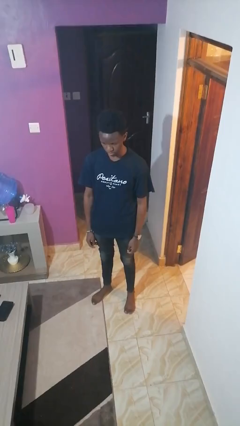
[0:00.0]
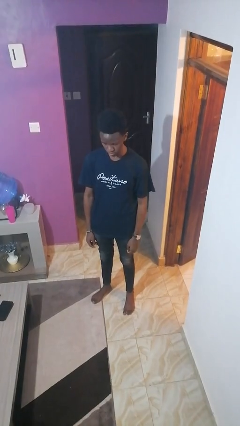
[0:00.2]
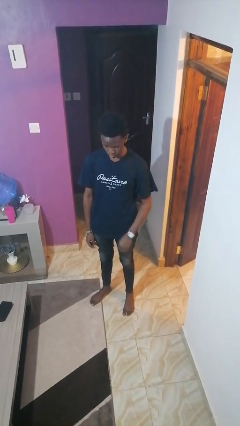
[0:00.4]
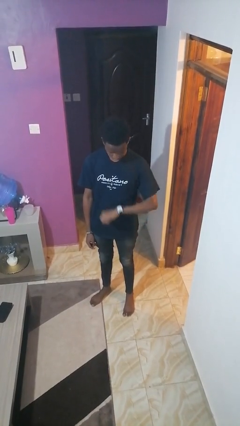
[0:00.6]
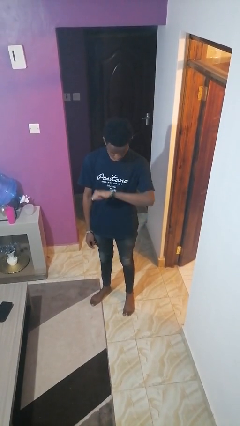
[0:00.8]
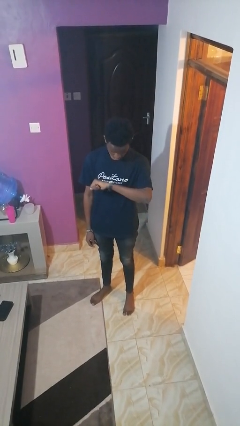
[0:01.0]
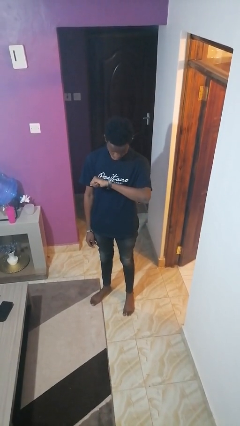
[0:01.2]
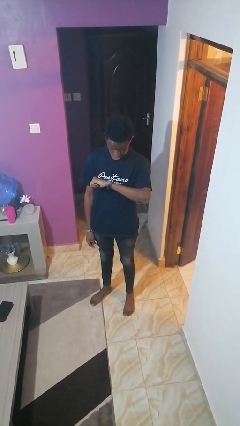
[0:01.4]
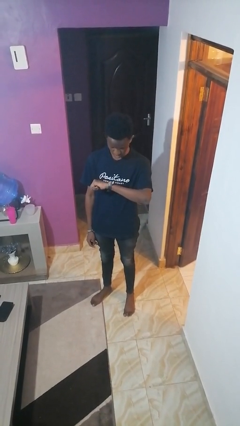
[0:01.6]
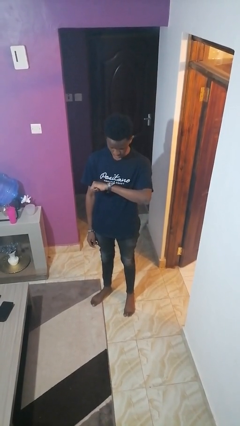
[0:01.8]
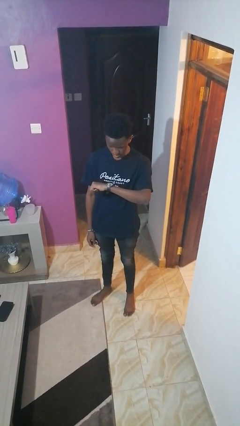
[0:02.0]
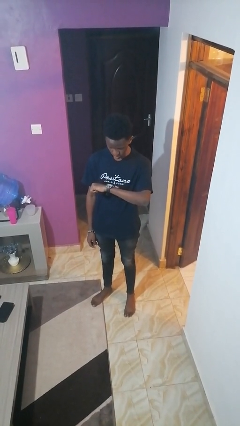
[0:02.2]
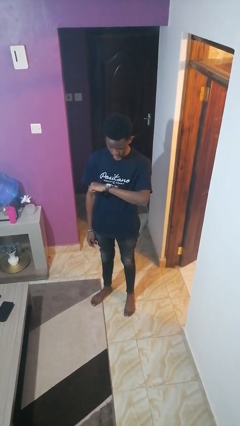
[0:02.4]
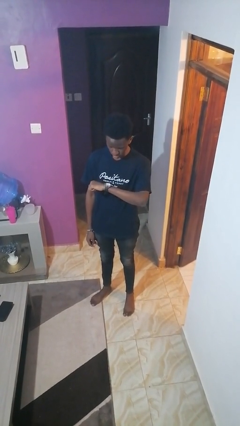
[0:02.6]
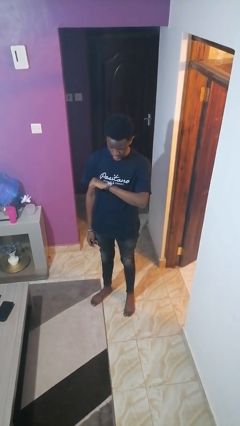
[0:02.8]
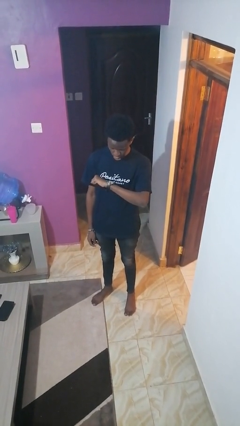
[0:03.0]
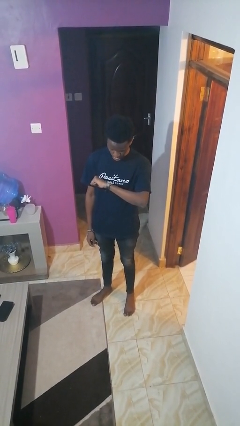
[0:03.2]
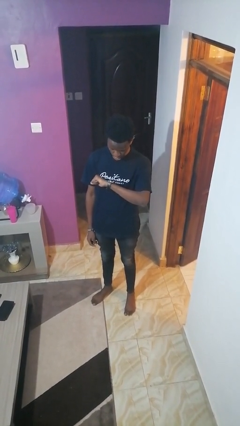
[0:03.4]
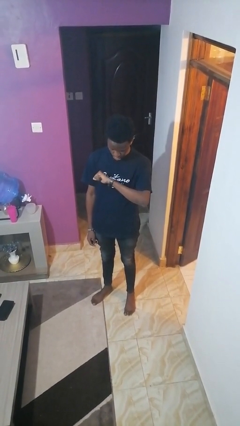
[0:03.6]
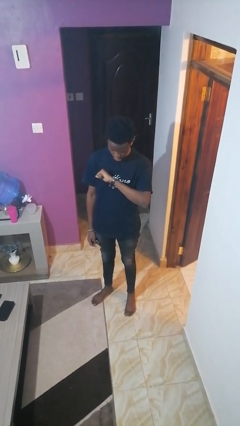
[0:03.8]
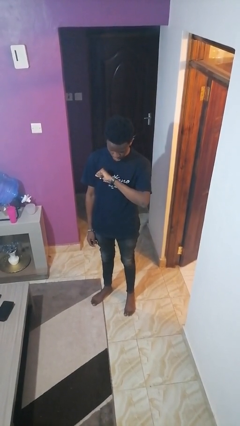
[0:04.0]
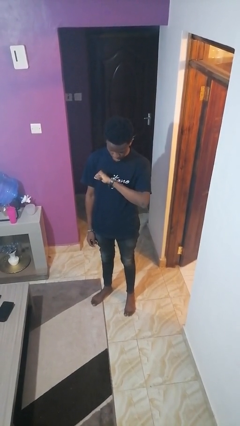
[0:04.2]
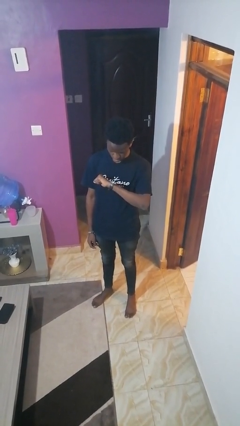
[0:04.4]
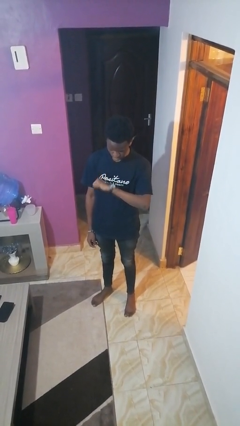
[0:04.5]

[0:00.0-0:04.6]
person looks at wristwatch

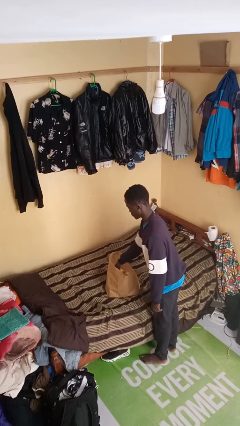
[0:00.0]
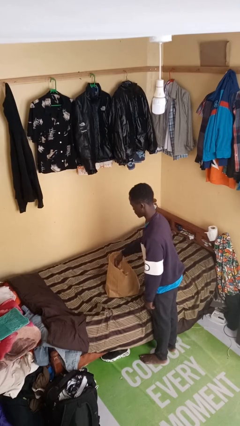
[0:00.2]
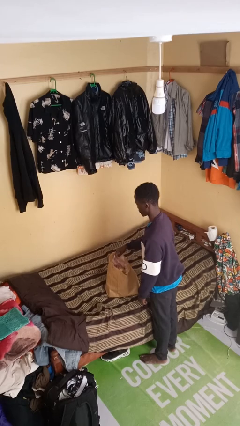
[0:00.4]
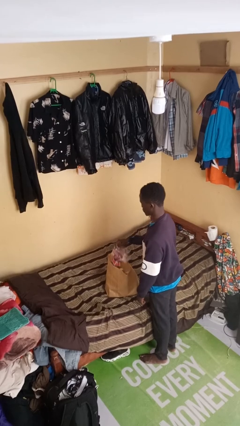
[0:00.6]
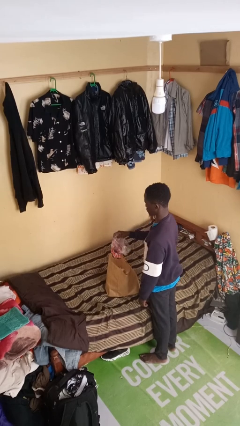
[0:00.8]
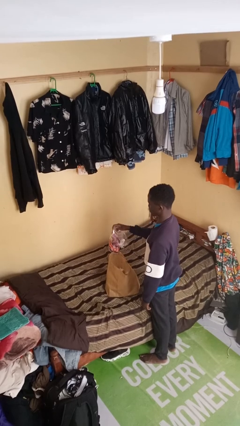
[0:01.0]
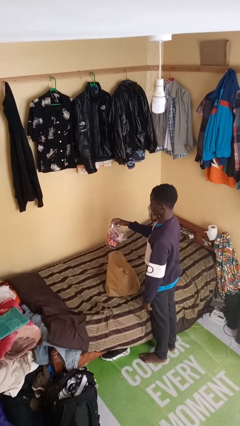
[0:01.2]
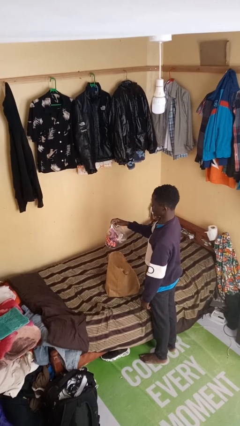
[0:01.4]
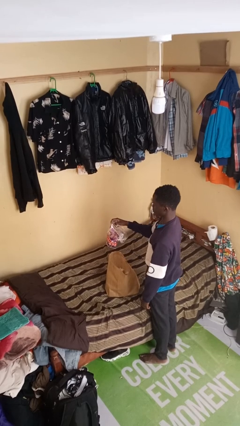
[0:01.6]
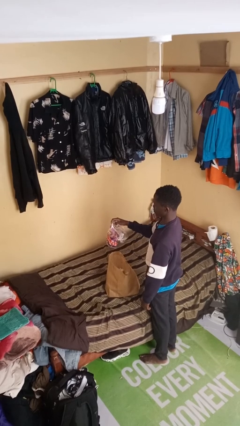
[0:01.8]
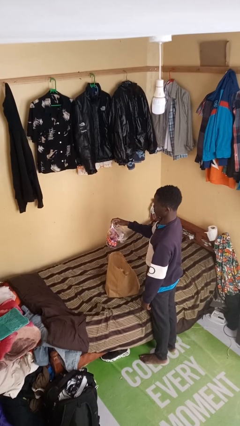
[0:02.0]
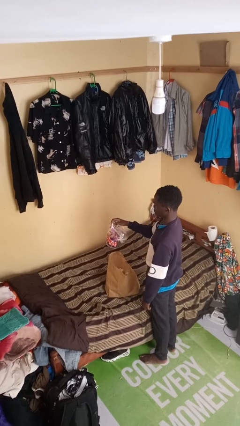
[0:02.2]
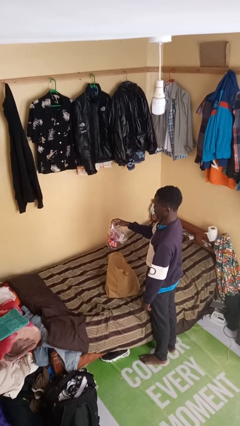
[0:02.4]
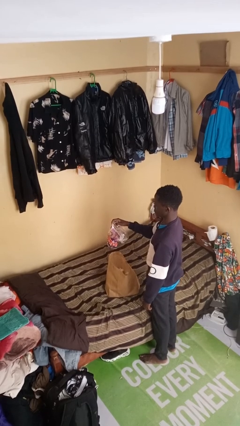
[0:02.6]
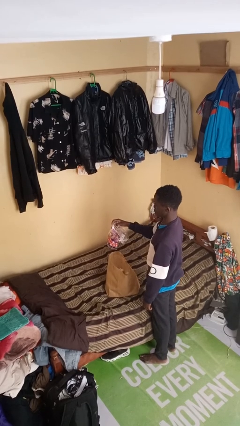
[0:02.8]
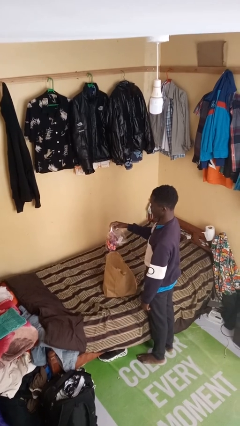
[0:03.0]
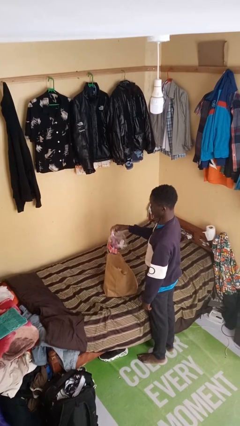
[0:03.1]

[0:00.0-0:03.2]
person takes object from bag

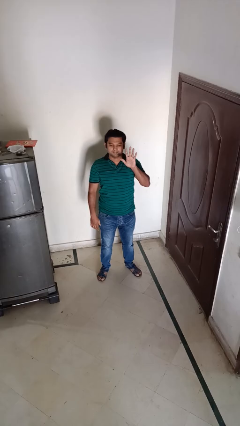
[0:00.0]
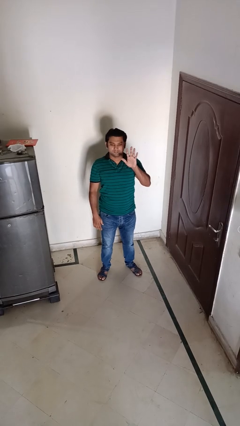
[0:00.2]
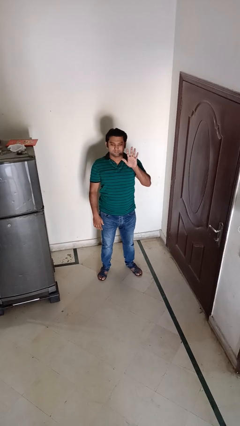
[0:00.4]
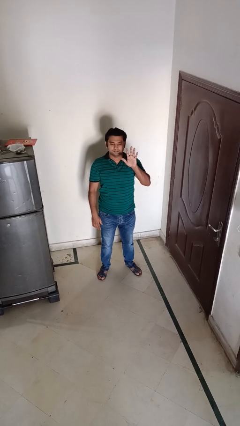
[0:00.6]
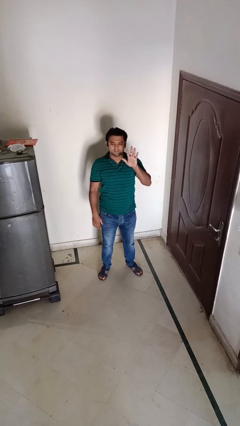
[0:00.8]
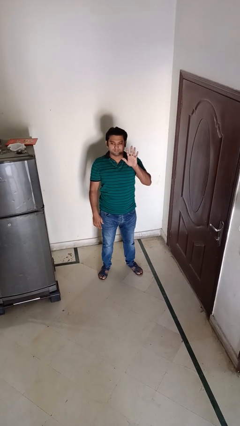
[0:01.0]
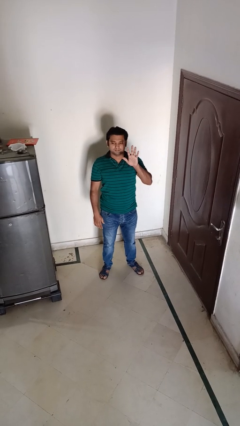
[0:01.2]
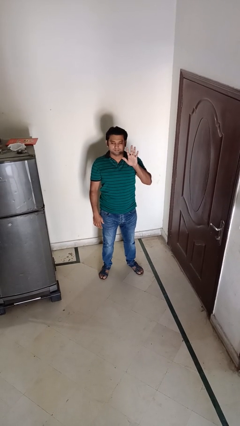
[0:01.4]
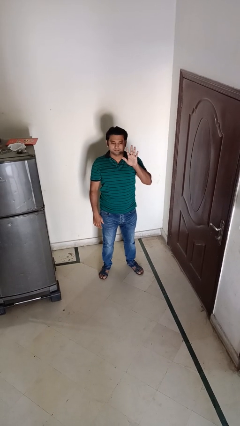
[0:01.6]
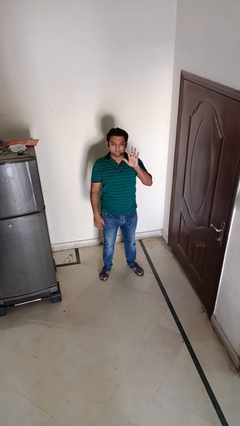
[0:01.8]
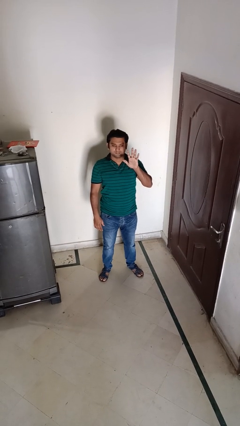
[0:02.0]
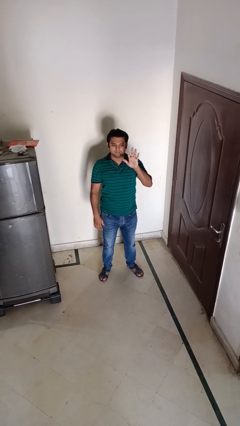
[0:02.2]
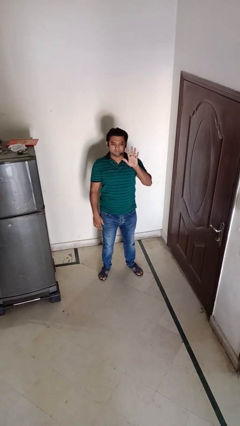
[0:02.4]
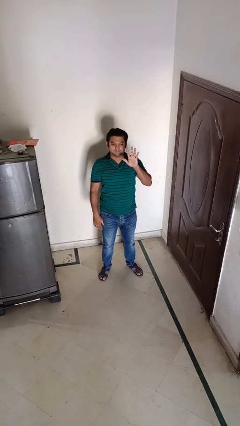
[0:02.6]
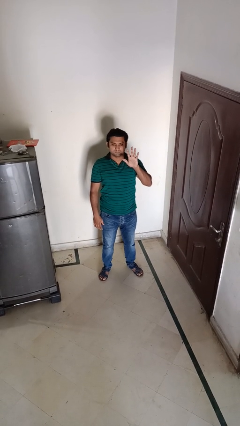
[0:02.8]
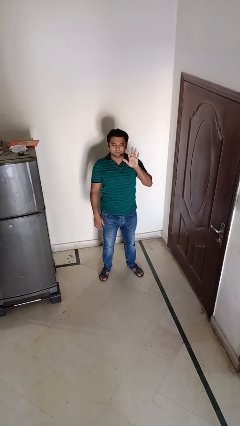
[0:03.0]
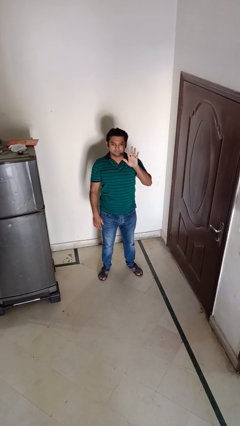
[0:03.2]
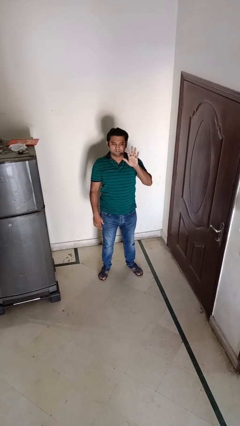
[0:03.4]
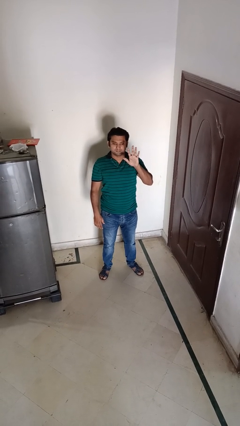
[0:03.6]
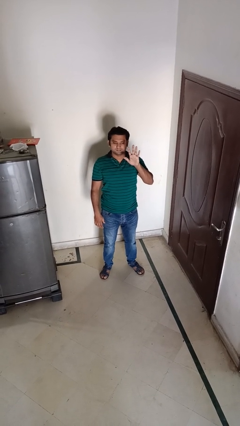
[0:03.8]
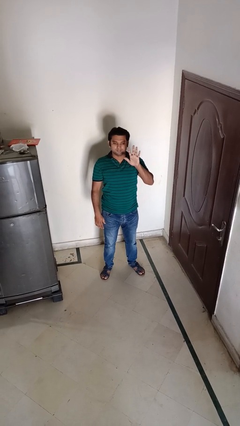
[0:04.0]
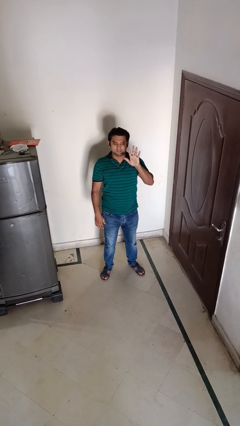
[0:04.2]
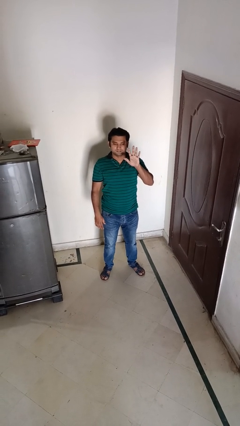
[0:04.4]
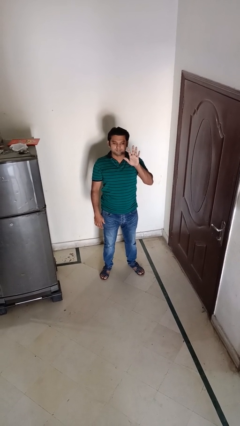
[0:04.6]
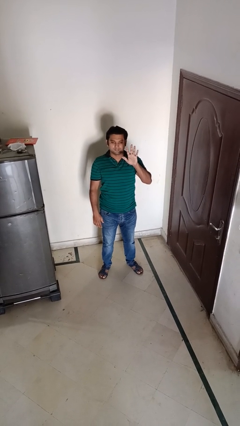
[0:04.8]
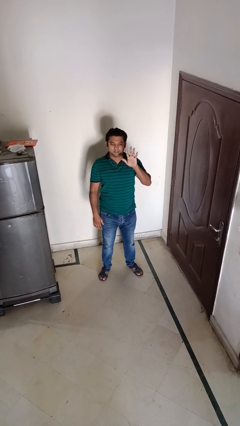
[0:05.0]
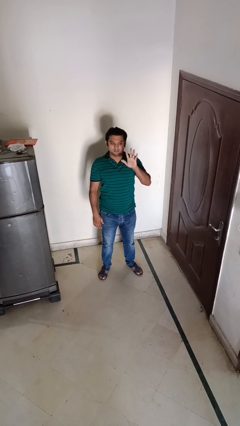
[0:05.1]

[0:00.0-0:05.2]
person gestures number five

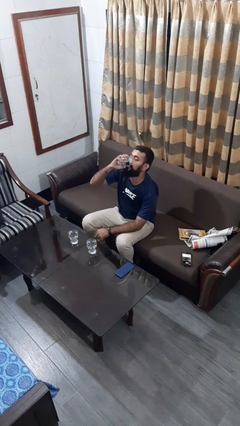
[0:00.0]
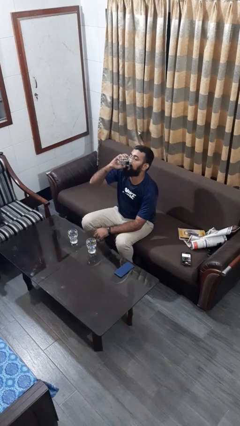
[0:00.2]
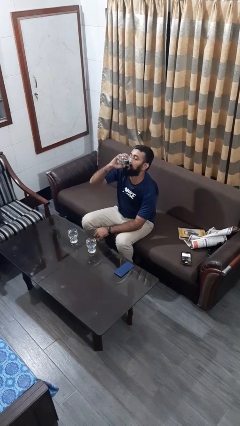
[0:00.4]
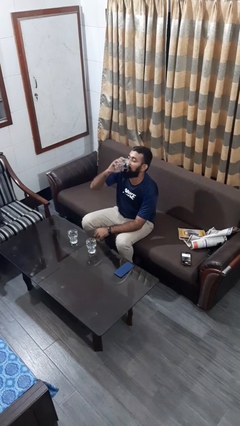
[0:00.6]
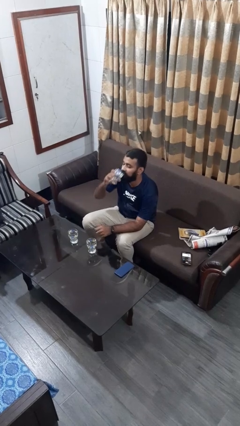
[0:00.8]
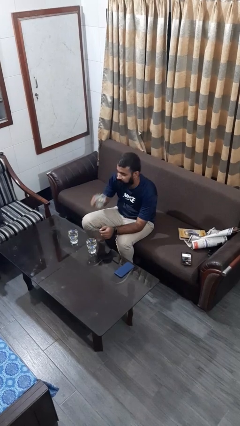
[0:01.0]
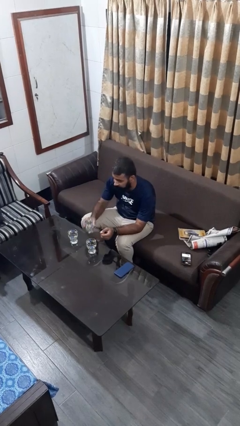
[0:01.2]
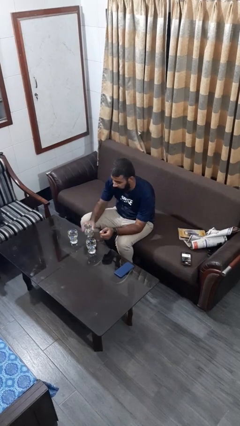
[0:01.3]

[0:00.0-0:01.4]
person puts down object on table

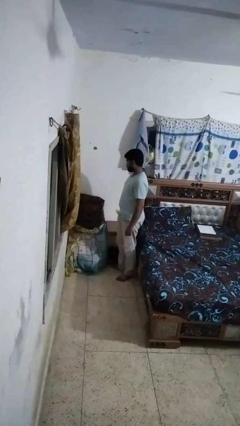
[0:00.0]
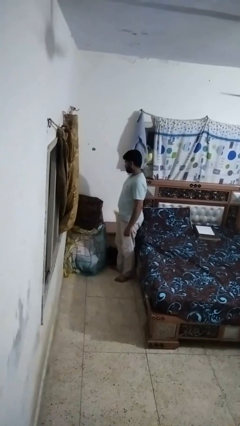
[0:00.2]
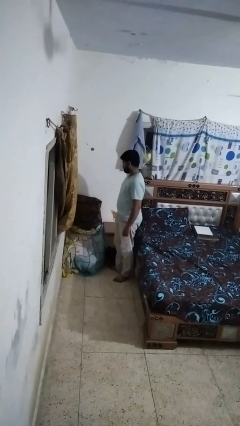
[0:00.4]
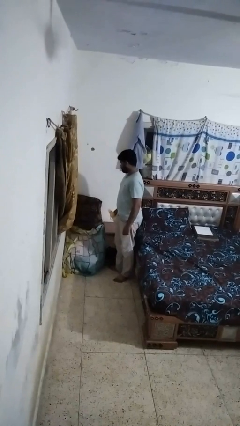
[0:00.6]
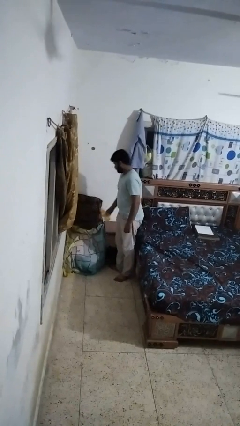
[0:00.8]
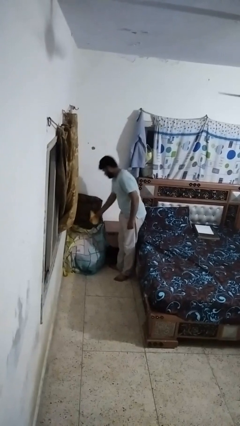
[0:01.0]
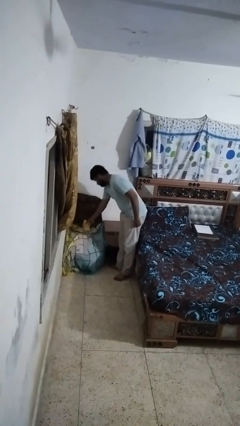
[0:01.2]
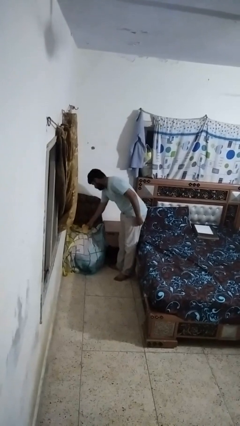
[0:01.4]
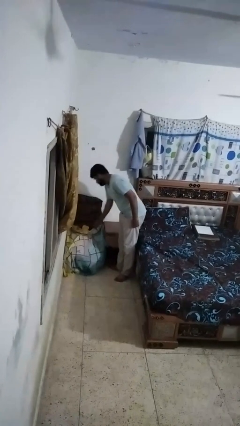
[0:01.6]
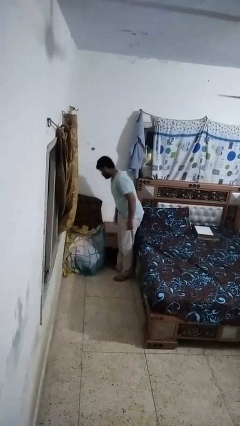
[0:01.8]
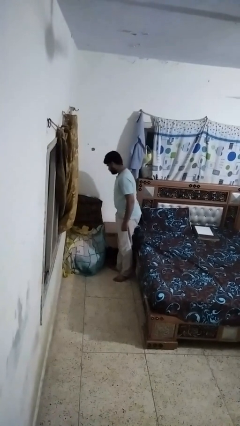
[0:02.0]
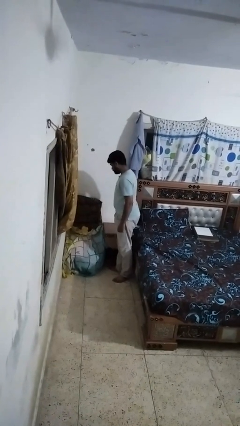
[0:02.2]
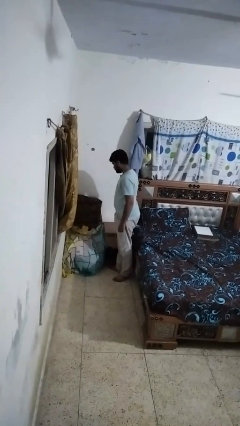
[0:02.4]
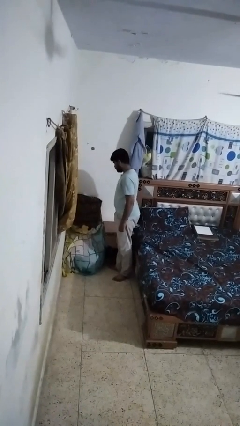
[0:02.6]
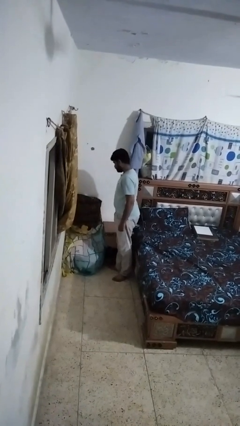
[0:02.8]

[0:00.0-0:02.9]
person puts down object on couch

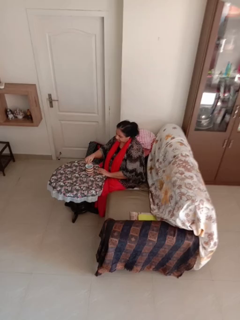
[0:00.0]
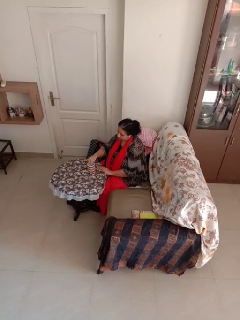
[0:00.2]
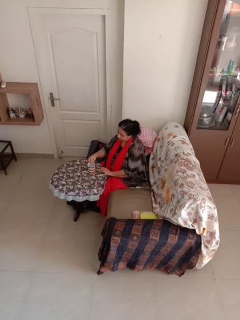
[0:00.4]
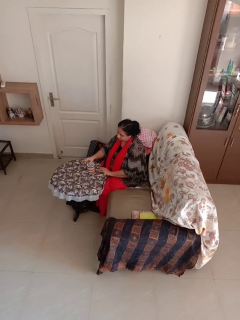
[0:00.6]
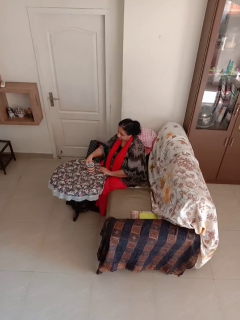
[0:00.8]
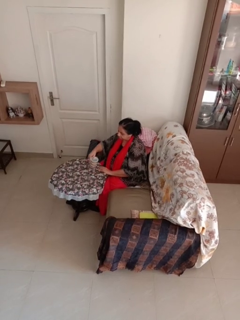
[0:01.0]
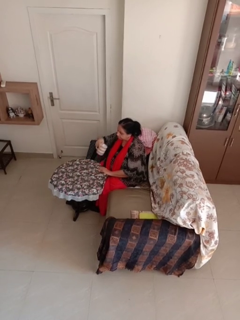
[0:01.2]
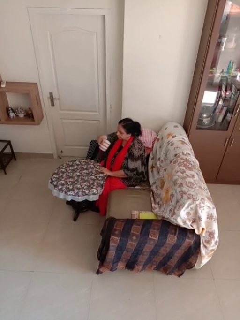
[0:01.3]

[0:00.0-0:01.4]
person stirs mug
